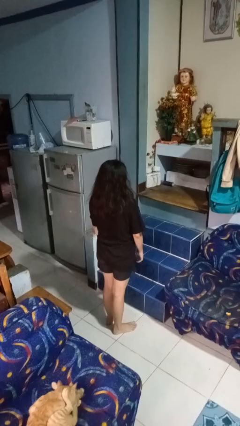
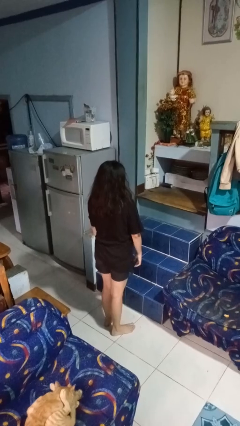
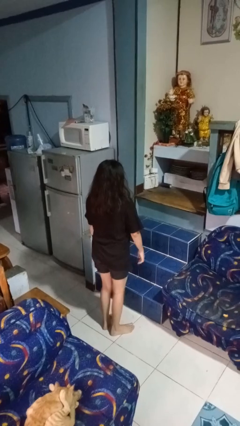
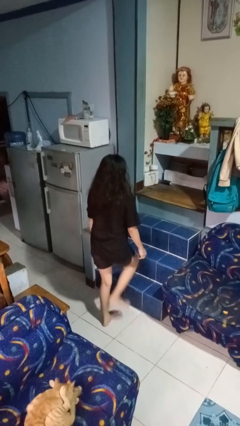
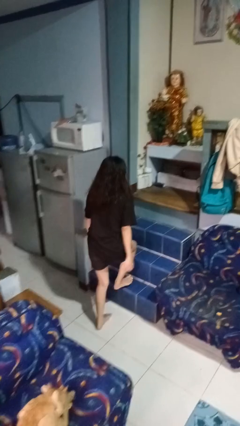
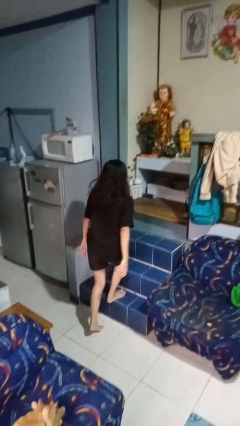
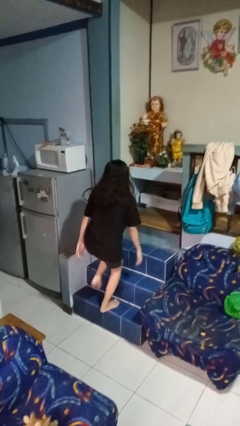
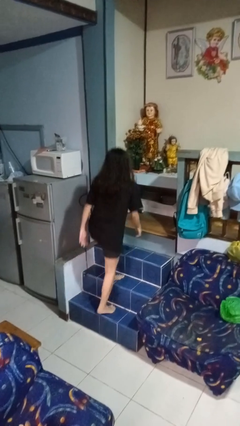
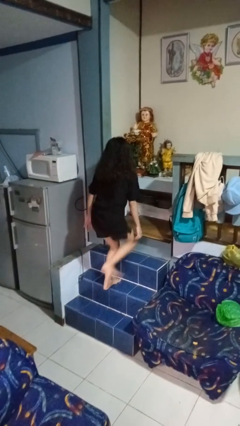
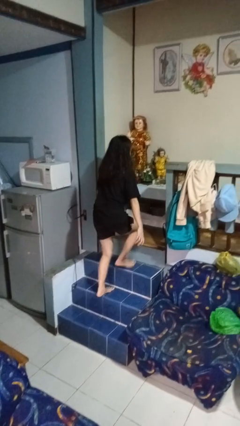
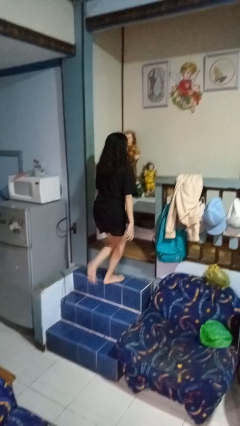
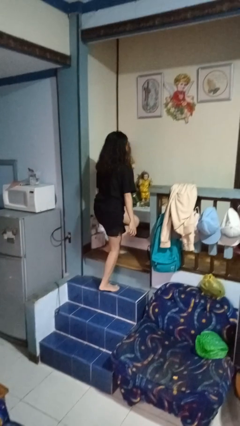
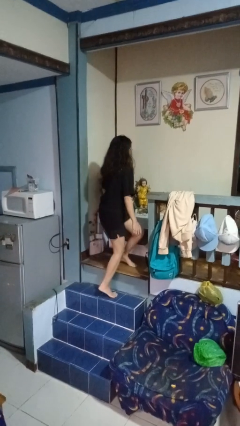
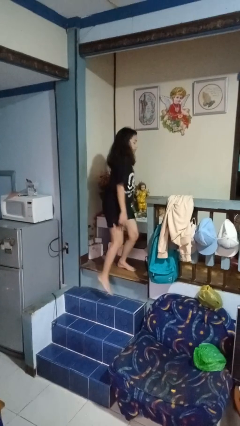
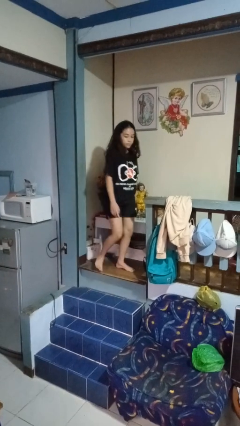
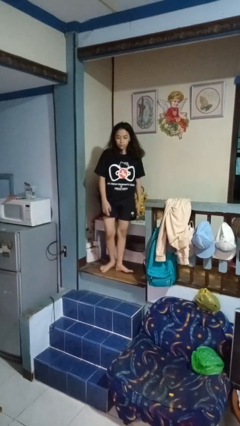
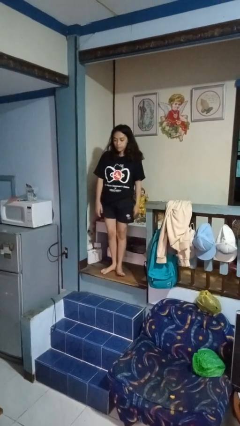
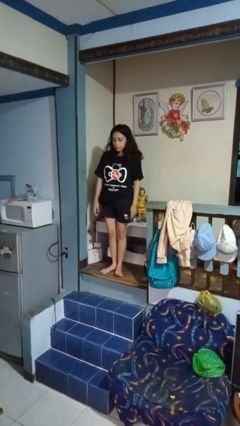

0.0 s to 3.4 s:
person climbs up stairs

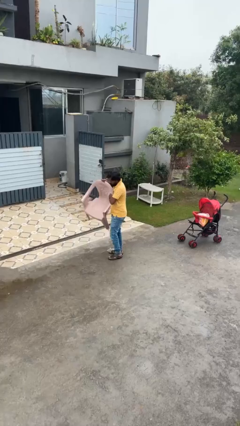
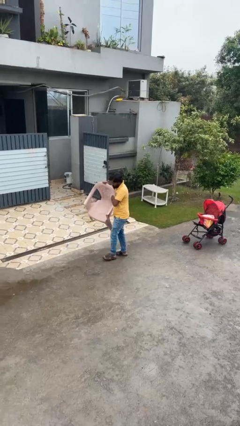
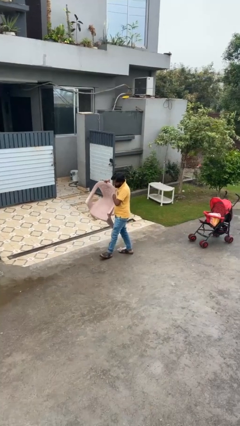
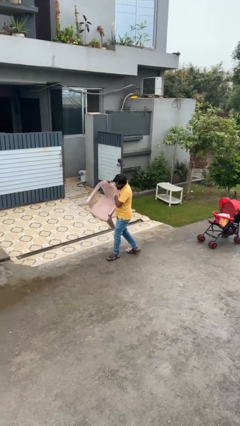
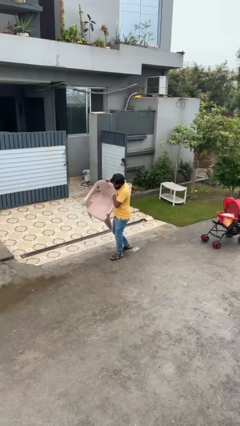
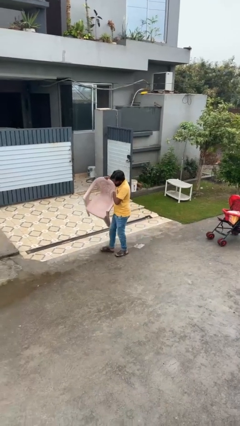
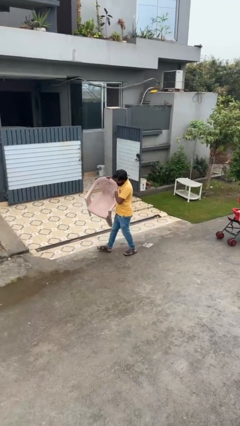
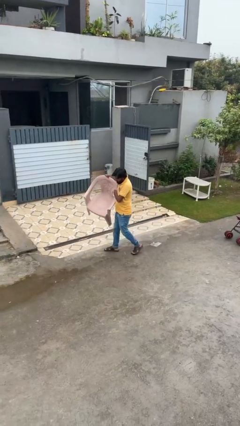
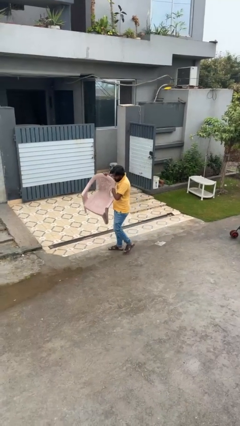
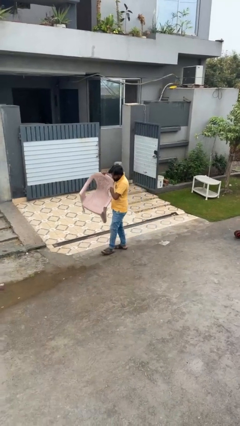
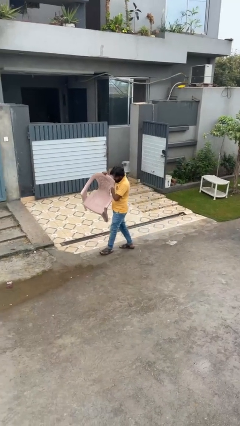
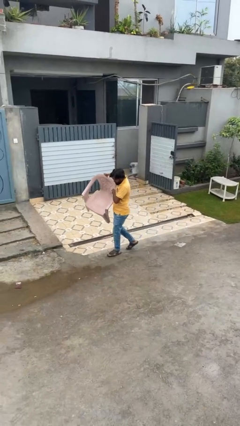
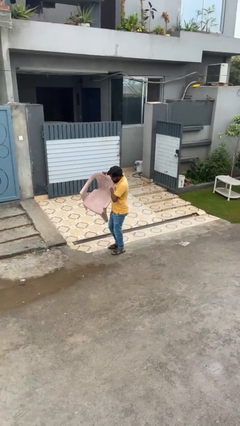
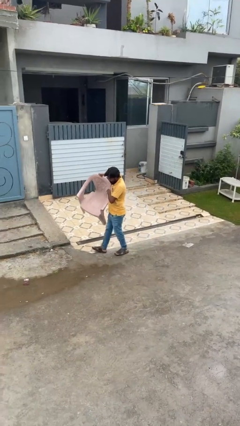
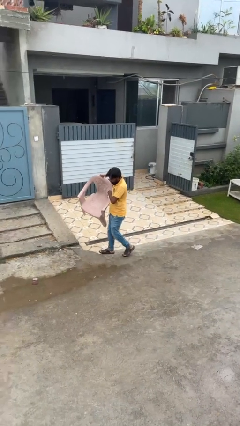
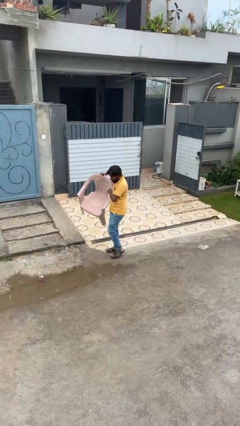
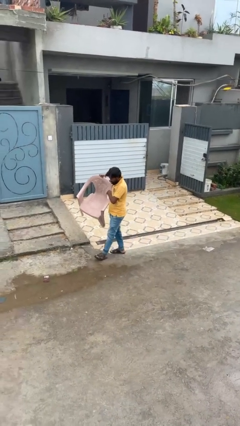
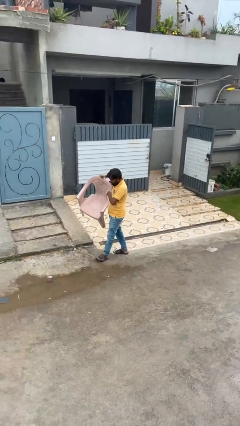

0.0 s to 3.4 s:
person carries furniture

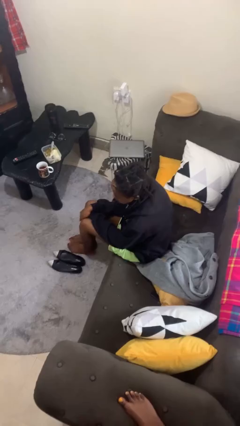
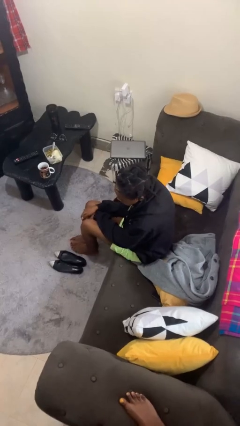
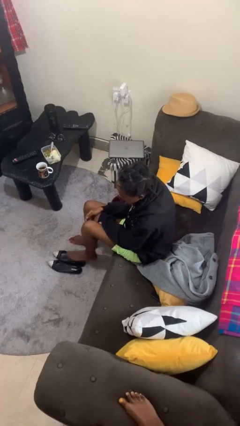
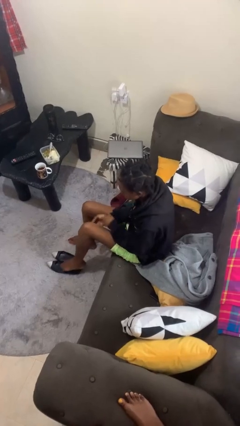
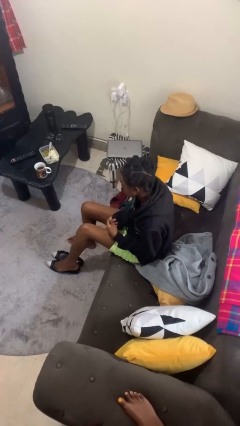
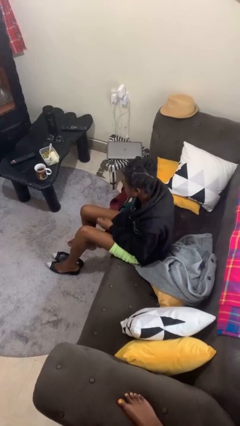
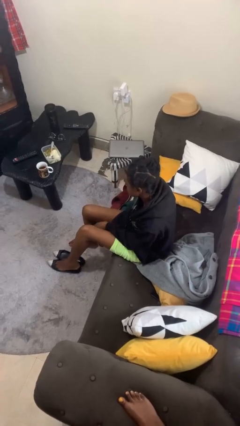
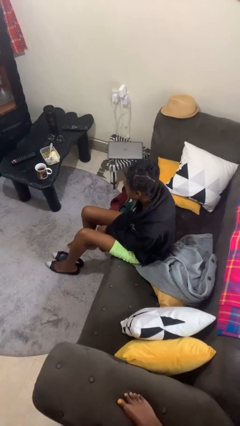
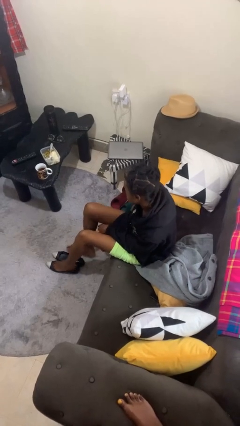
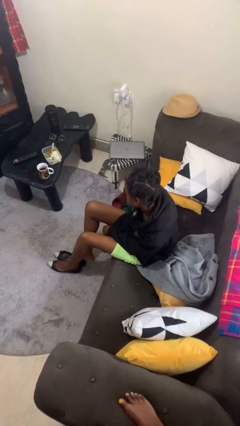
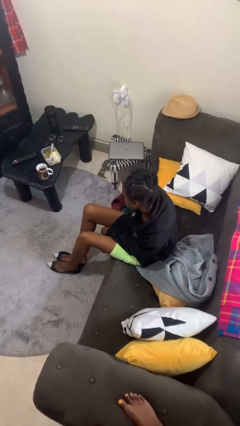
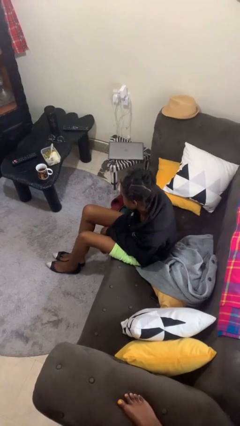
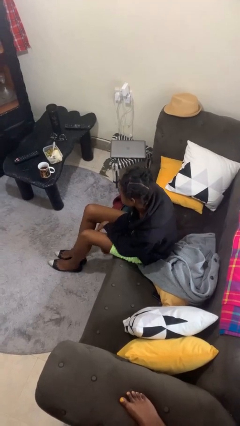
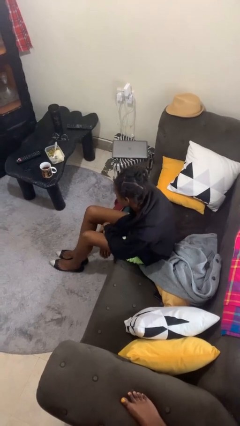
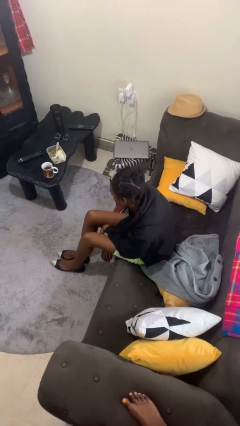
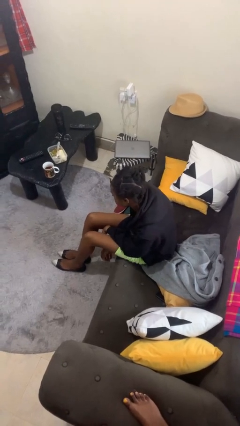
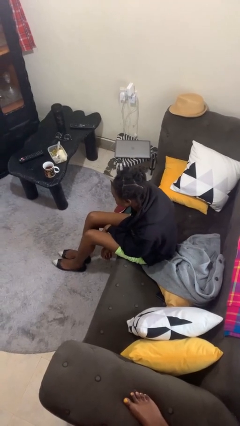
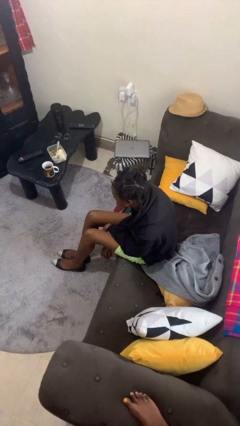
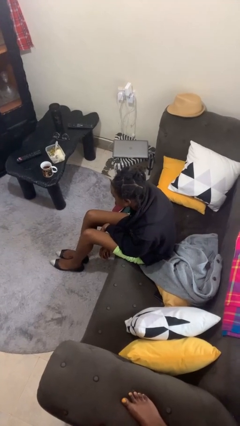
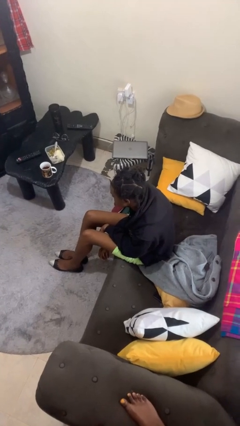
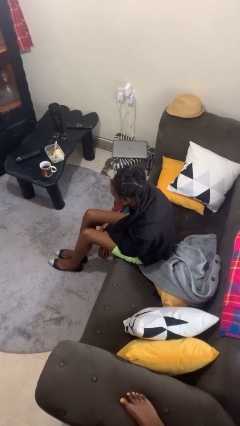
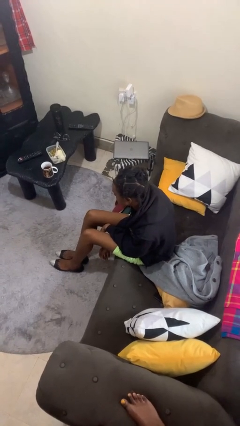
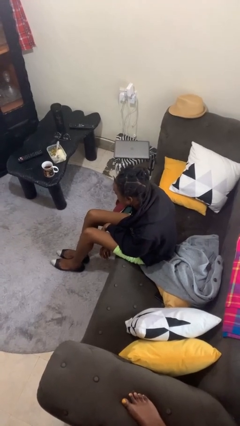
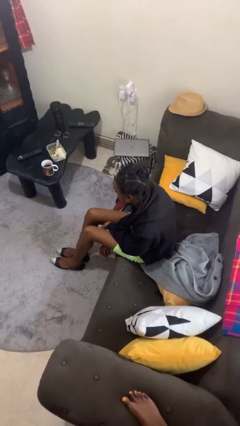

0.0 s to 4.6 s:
person puts on shoes

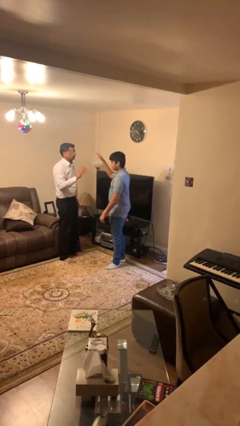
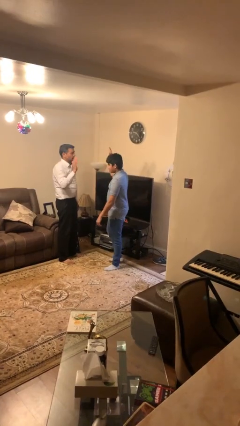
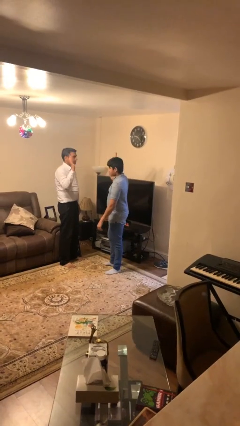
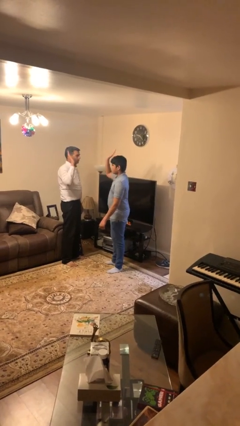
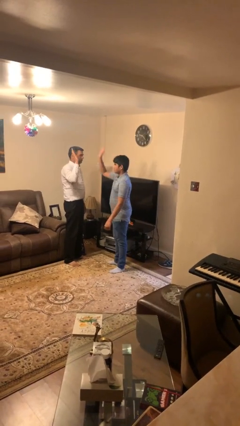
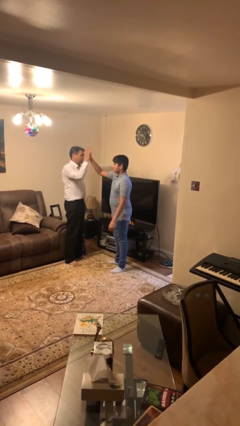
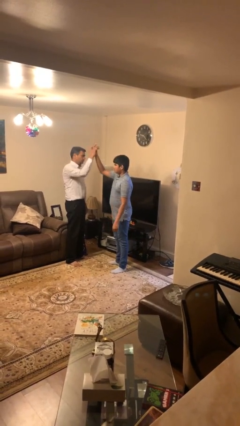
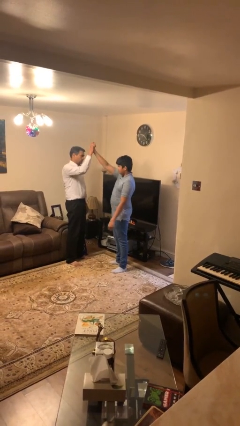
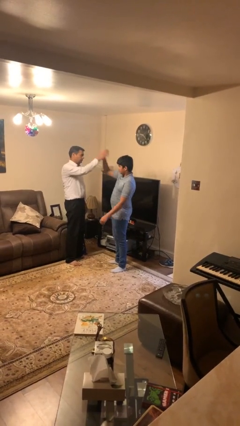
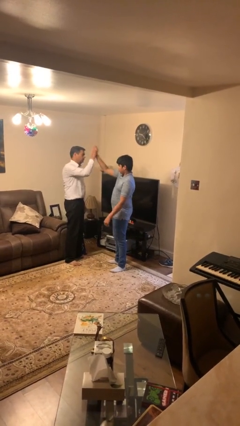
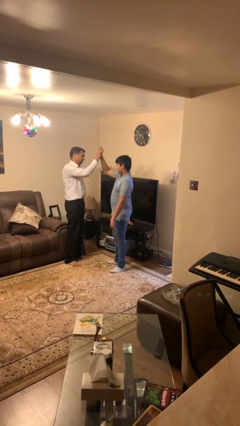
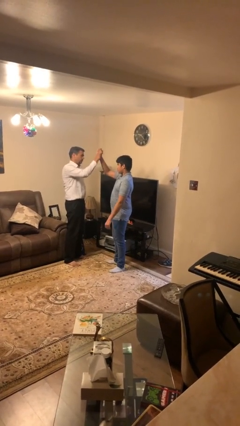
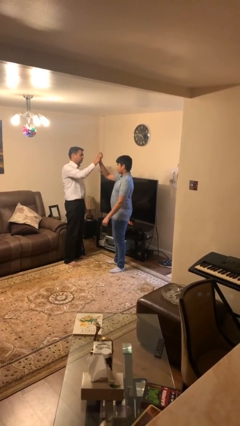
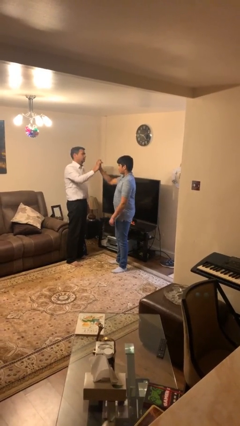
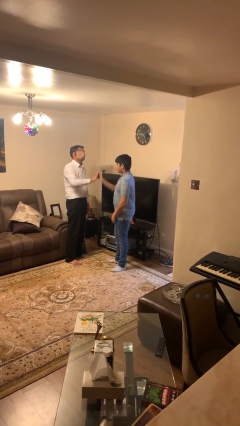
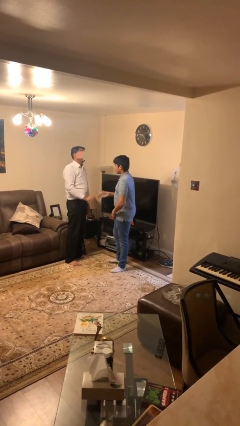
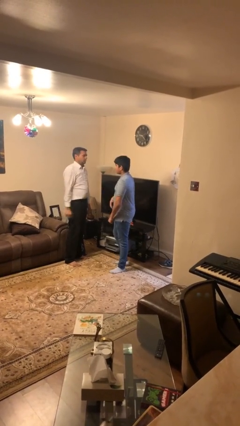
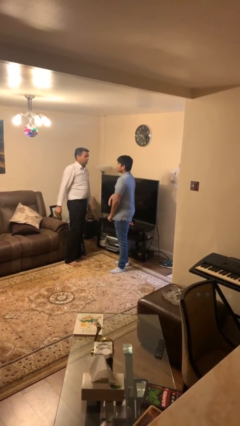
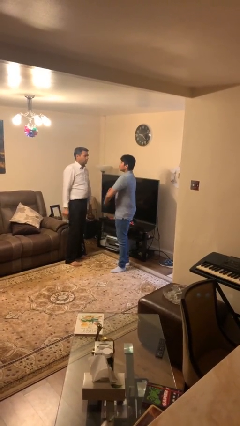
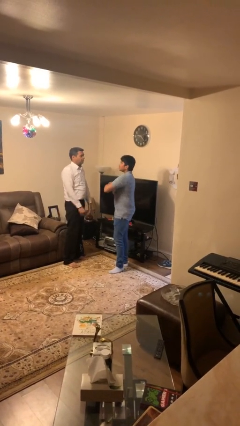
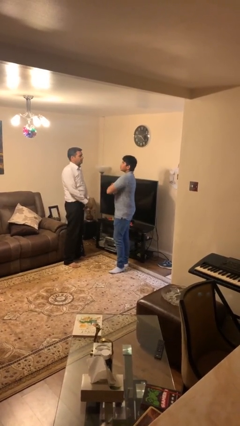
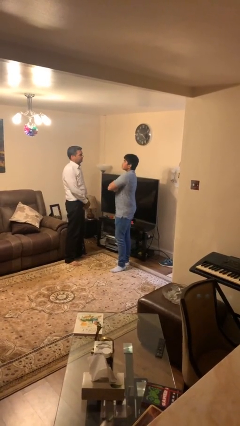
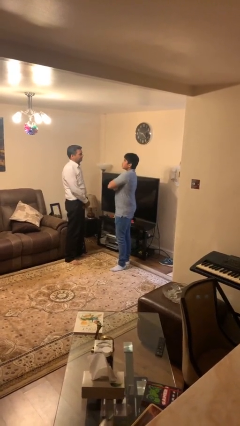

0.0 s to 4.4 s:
person highfives hand

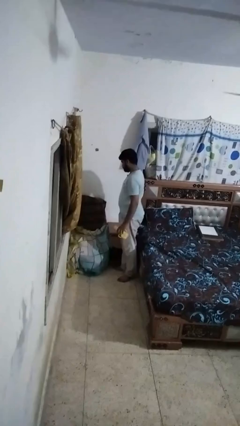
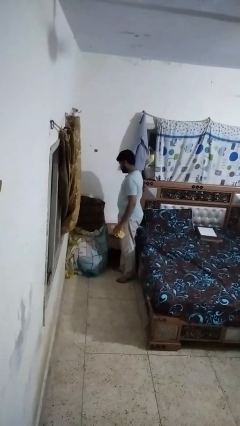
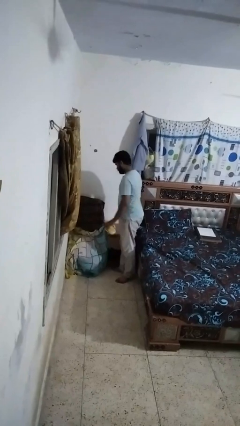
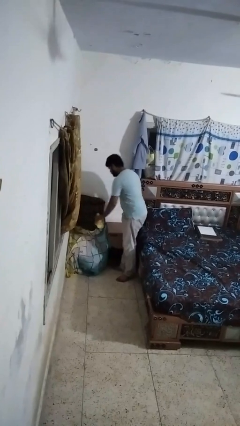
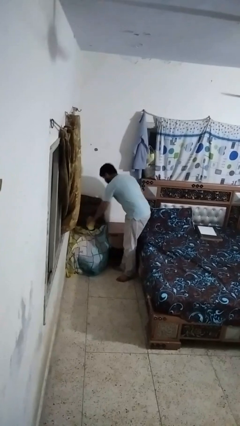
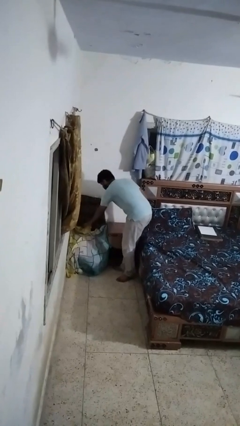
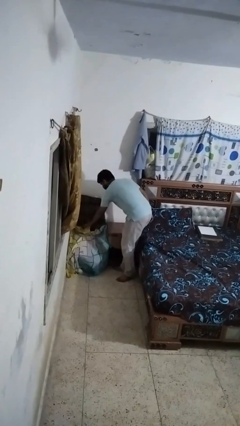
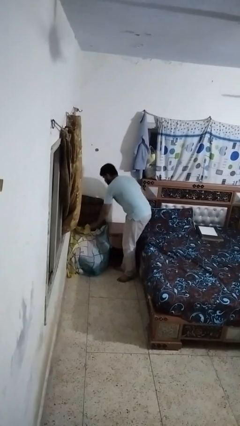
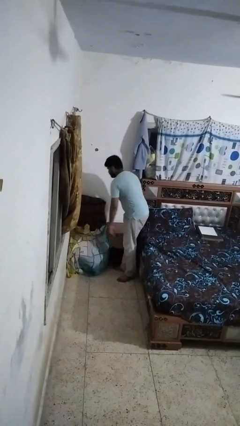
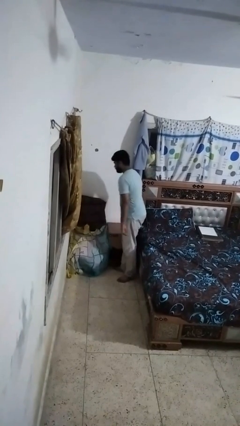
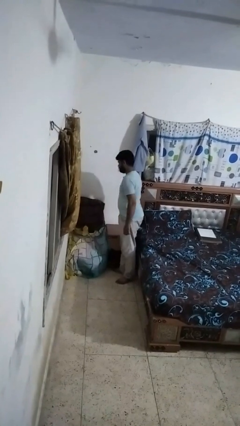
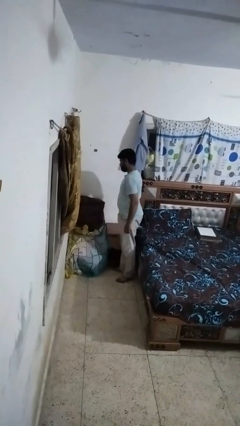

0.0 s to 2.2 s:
person puts down object on couch
